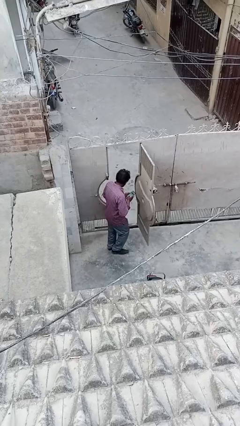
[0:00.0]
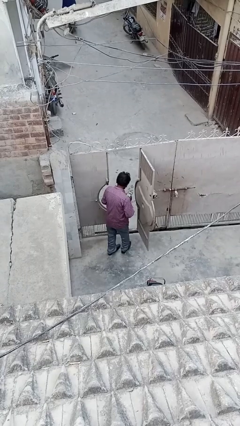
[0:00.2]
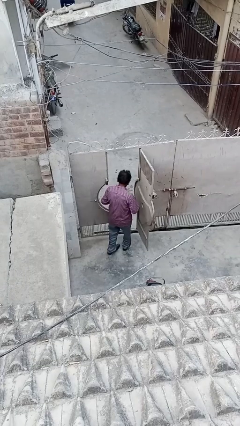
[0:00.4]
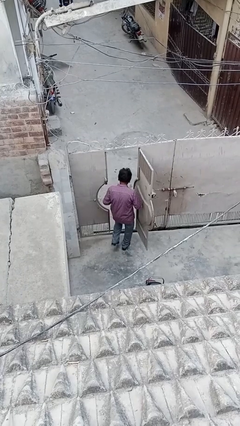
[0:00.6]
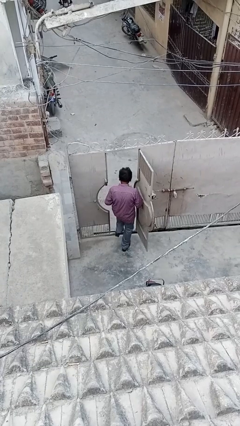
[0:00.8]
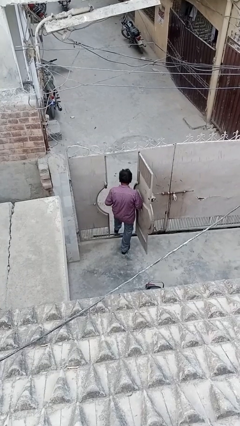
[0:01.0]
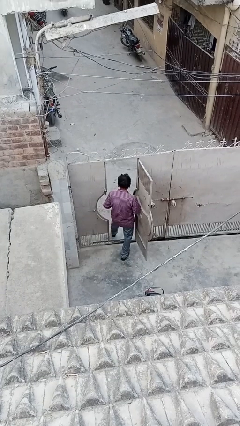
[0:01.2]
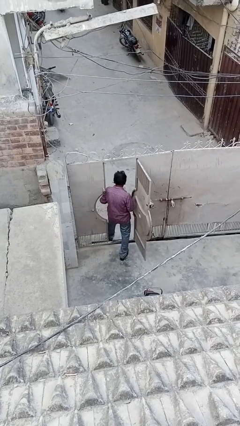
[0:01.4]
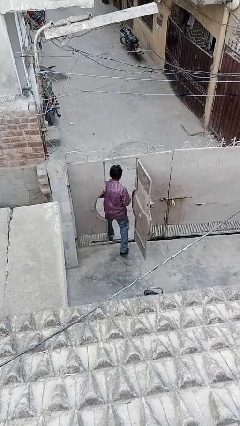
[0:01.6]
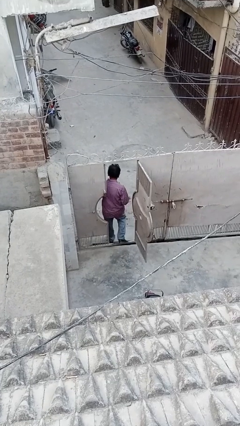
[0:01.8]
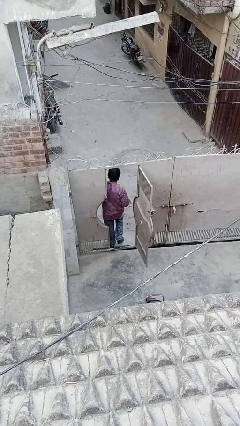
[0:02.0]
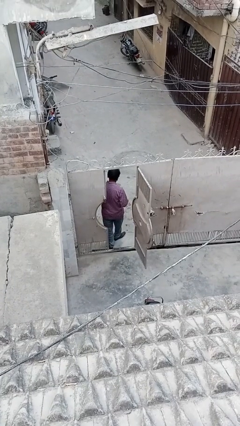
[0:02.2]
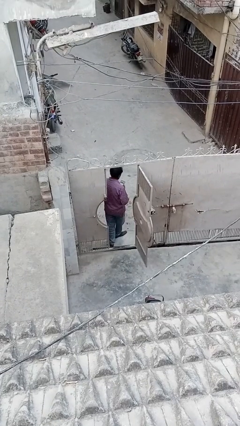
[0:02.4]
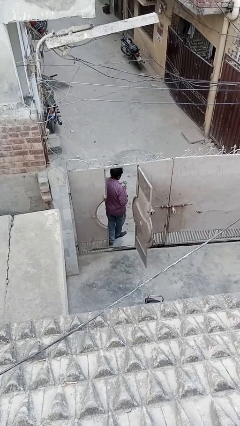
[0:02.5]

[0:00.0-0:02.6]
person exits scene through structure

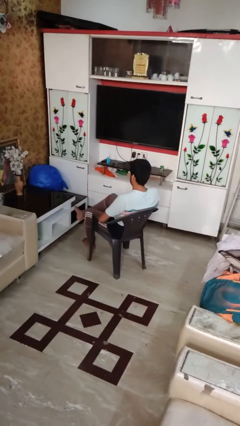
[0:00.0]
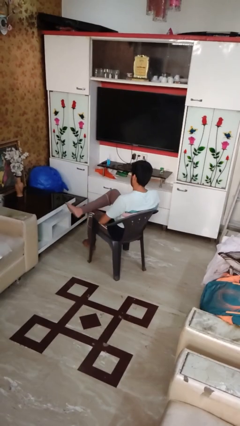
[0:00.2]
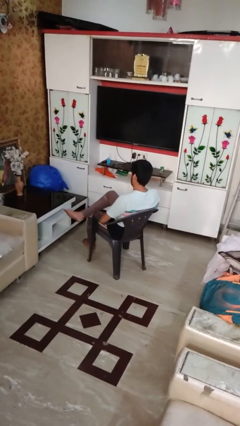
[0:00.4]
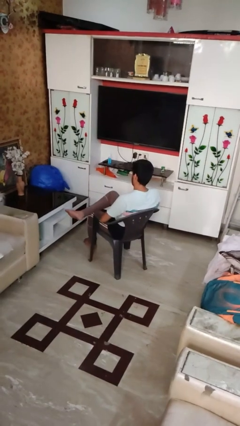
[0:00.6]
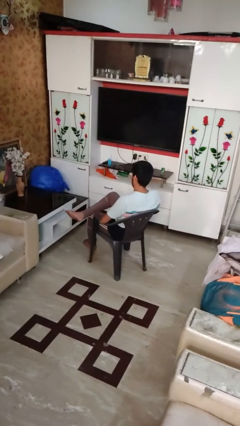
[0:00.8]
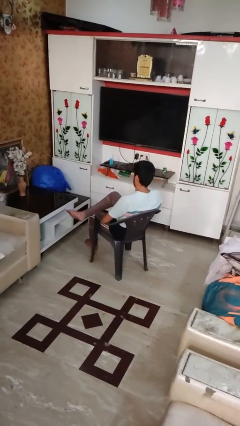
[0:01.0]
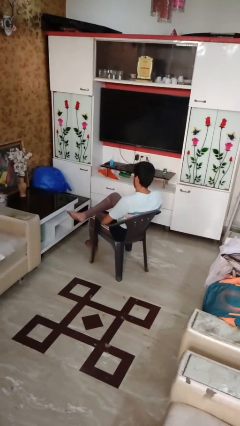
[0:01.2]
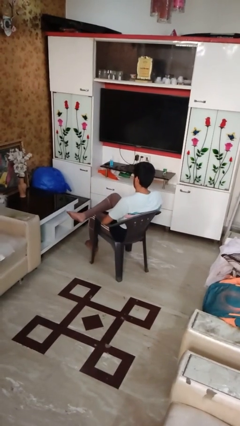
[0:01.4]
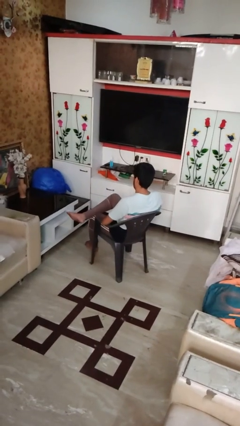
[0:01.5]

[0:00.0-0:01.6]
person crosses legs

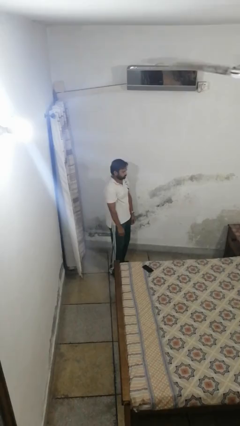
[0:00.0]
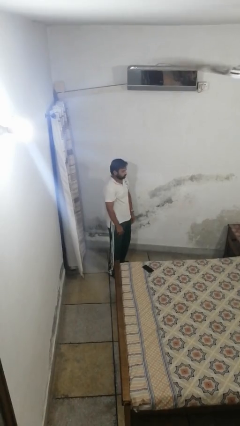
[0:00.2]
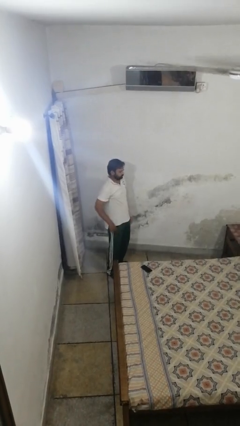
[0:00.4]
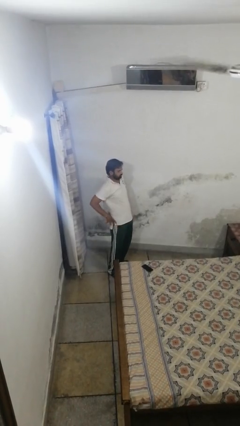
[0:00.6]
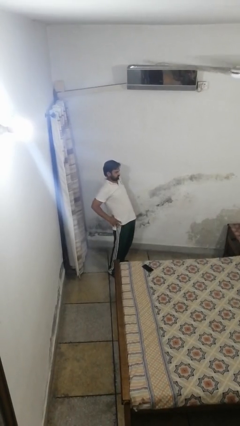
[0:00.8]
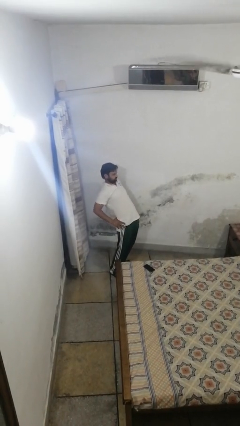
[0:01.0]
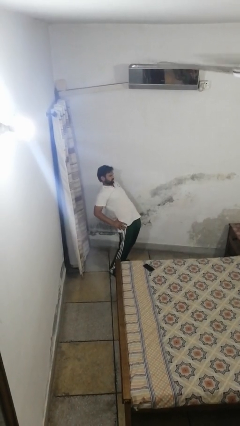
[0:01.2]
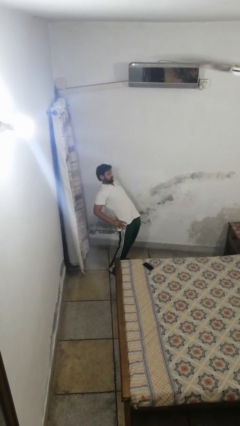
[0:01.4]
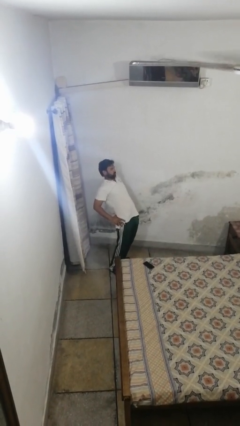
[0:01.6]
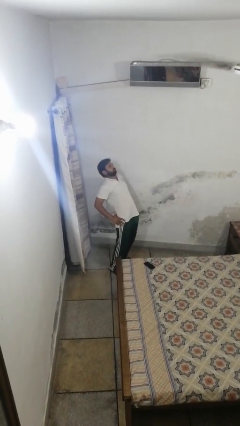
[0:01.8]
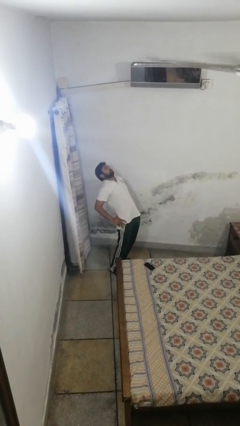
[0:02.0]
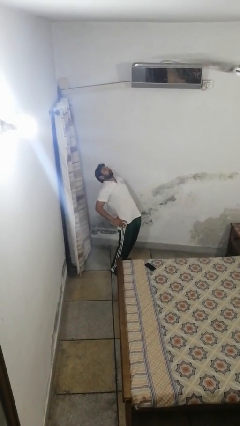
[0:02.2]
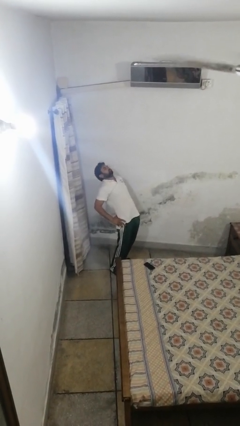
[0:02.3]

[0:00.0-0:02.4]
person stretches back

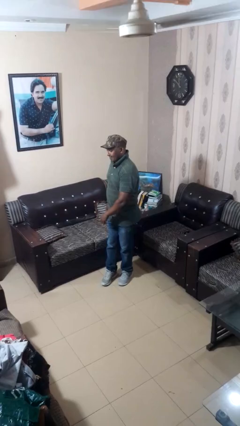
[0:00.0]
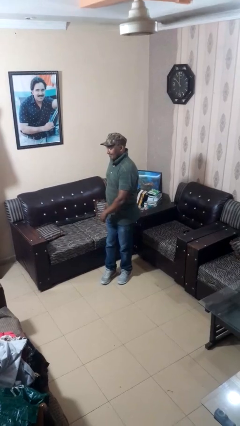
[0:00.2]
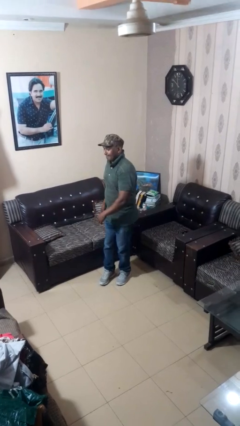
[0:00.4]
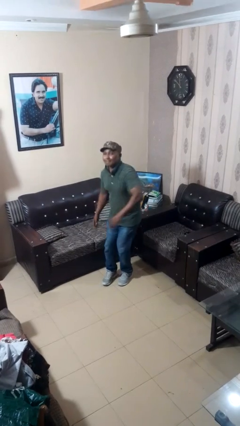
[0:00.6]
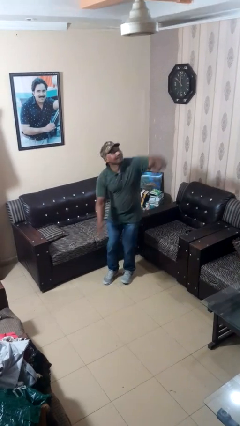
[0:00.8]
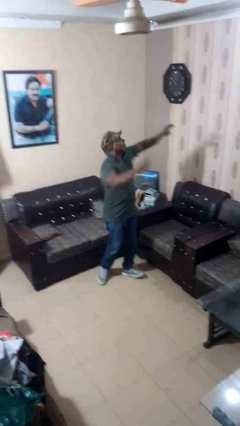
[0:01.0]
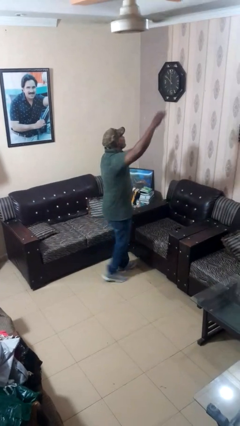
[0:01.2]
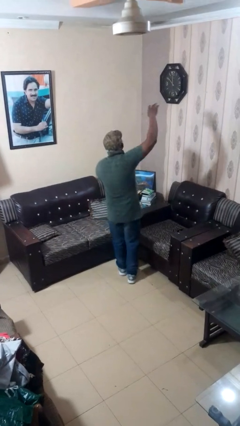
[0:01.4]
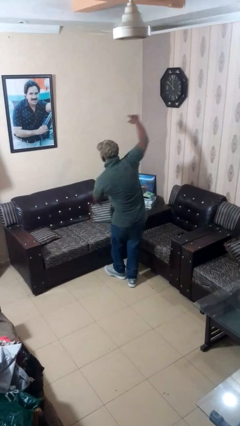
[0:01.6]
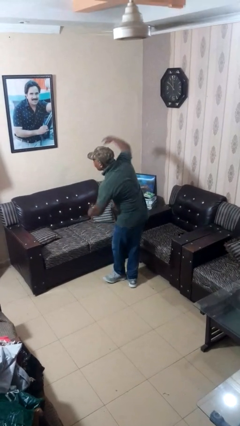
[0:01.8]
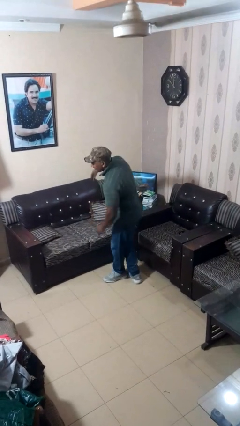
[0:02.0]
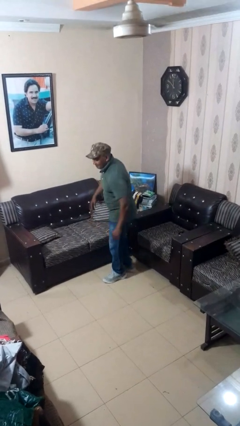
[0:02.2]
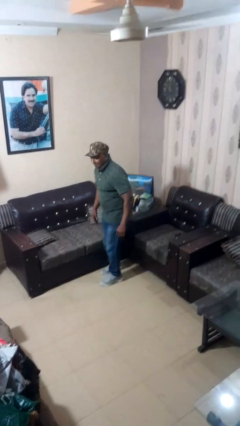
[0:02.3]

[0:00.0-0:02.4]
person twirls

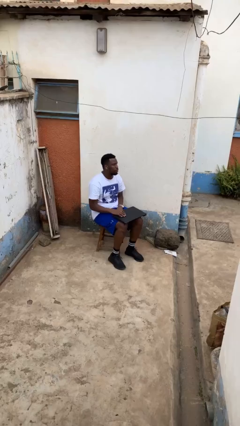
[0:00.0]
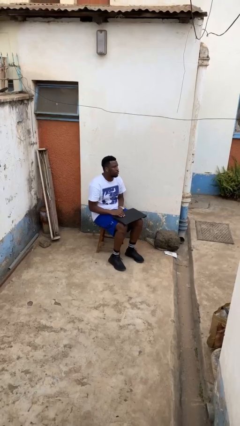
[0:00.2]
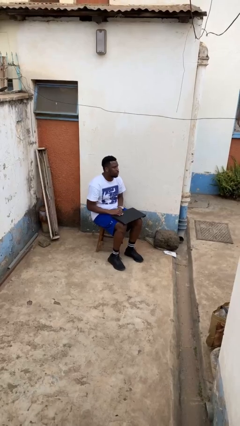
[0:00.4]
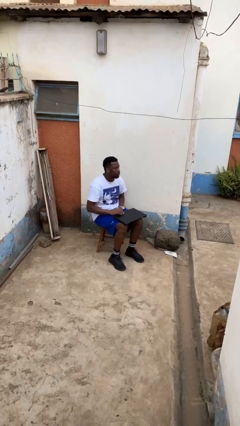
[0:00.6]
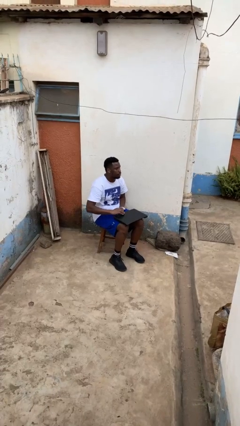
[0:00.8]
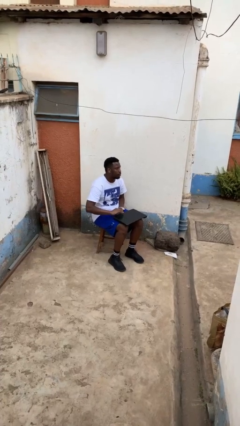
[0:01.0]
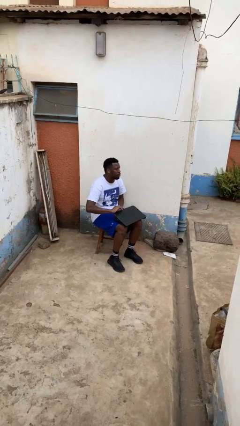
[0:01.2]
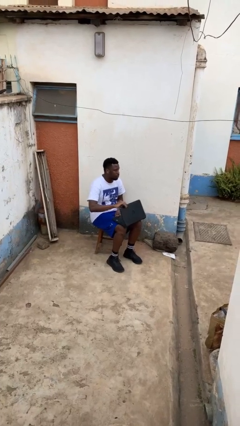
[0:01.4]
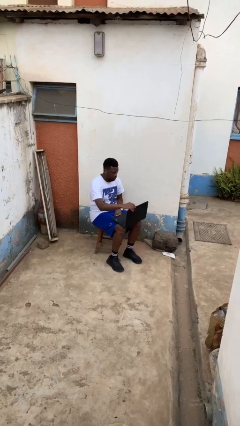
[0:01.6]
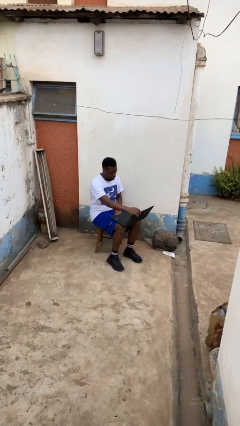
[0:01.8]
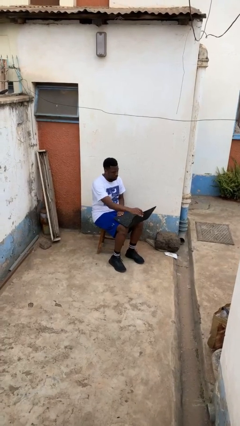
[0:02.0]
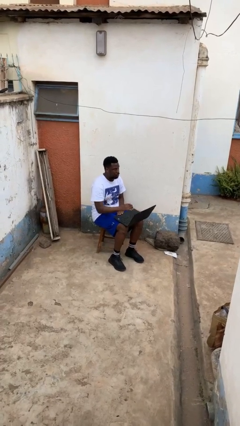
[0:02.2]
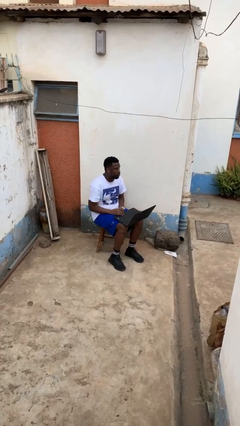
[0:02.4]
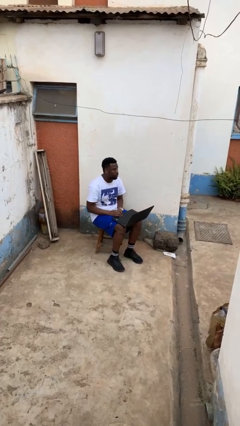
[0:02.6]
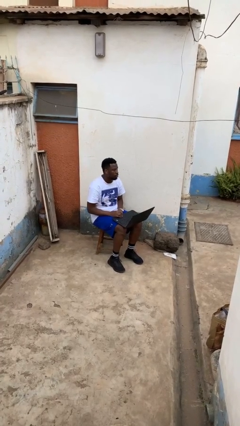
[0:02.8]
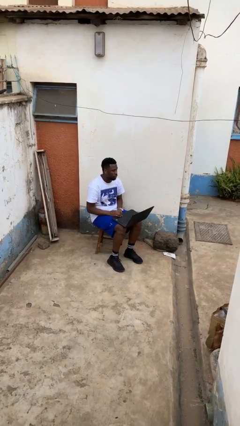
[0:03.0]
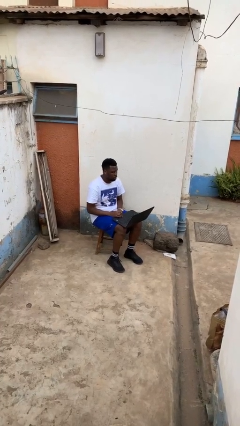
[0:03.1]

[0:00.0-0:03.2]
person opens laptop

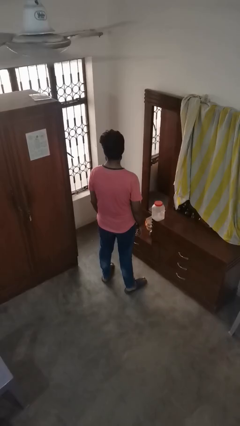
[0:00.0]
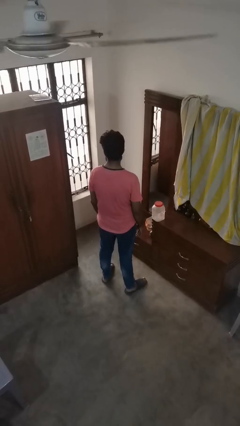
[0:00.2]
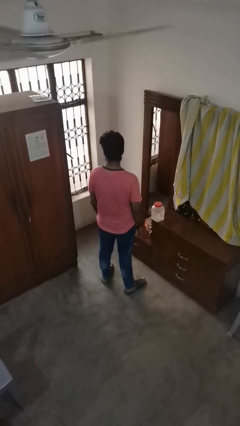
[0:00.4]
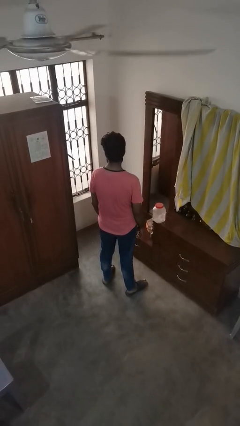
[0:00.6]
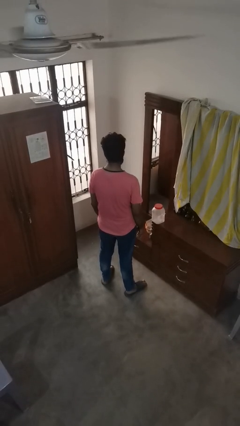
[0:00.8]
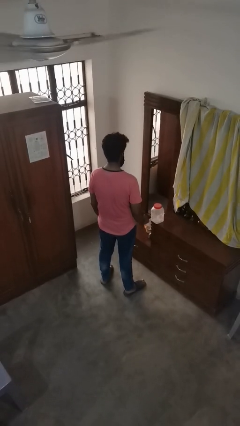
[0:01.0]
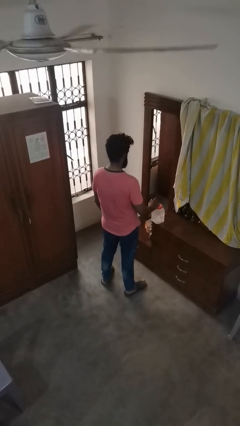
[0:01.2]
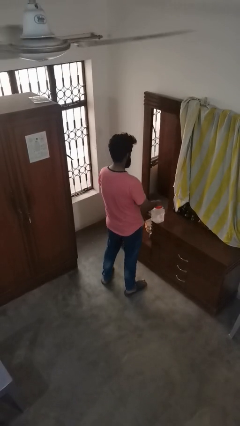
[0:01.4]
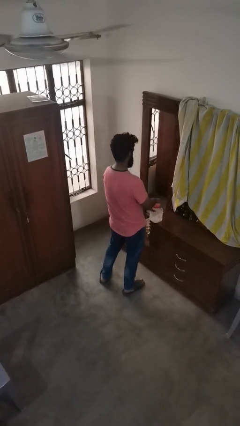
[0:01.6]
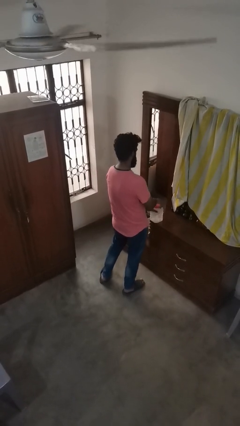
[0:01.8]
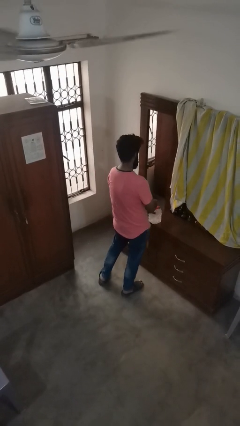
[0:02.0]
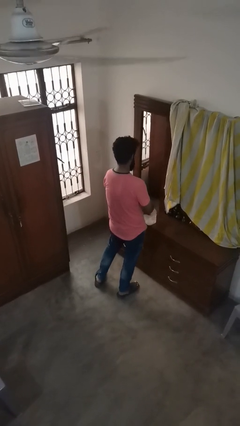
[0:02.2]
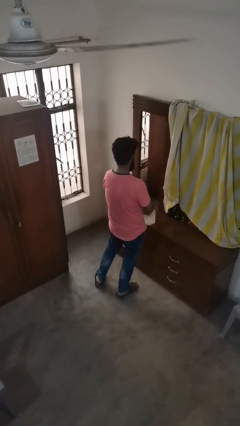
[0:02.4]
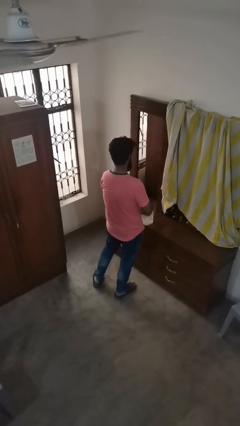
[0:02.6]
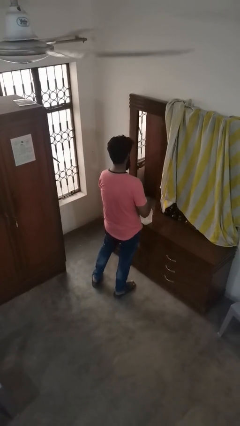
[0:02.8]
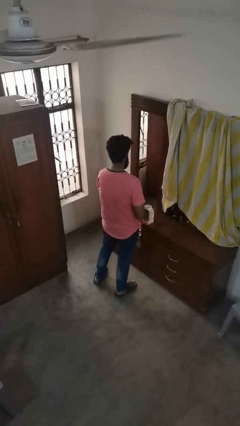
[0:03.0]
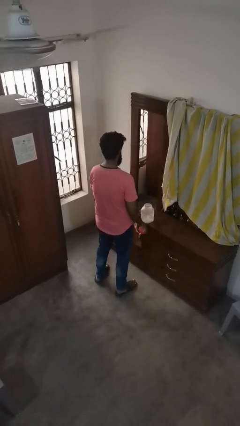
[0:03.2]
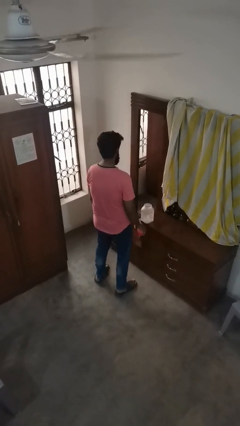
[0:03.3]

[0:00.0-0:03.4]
person opens jar

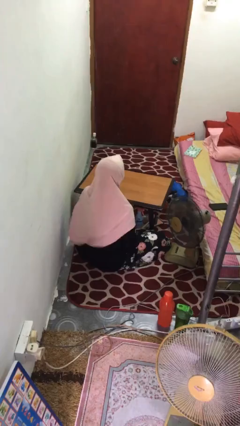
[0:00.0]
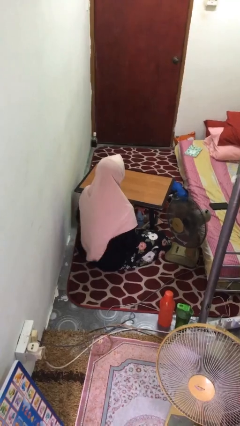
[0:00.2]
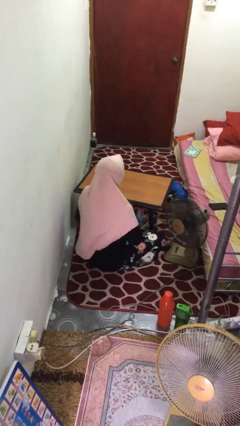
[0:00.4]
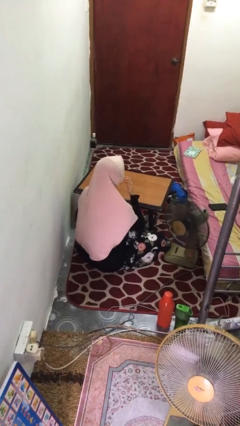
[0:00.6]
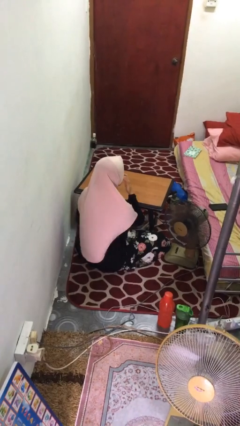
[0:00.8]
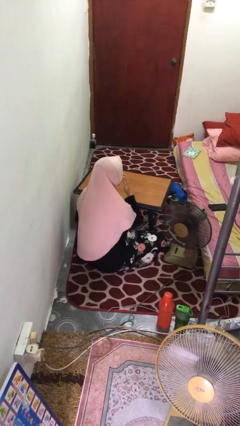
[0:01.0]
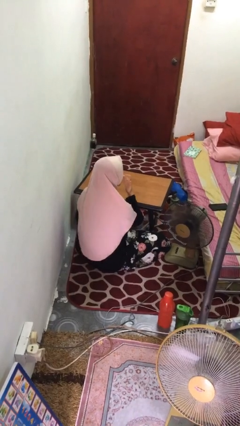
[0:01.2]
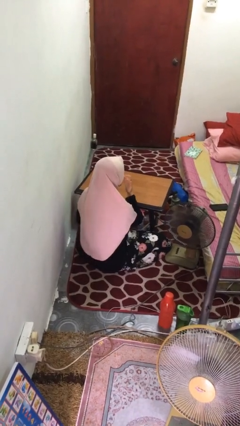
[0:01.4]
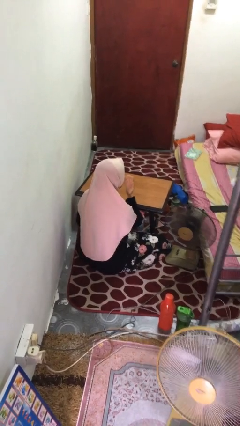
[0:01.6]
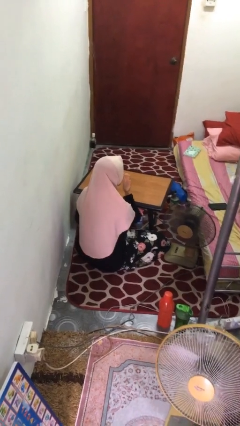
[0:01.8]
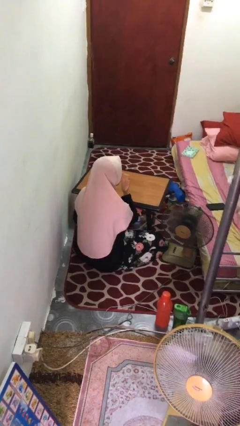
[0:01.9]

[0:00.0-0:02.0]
person licks fingers
